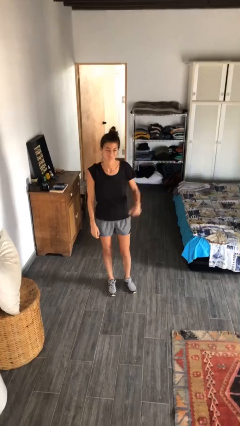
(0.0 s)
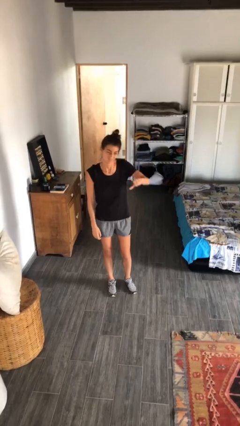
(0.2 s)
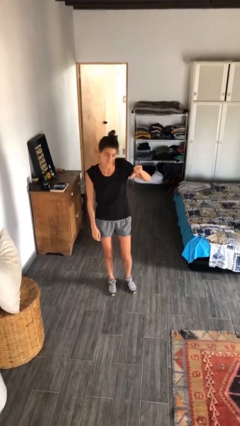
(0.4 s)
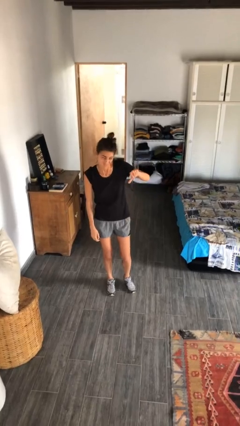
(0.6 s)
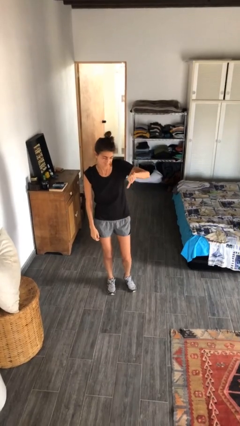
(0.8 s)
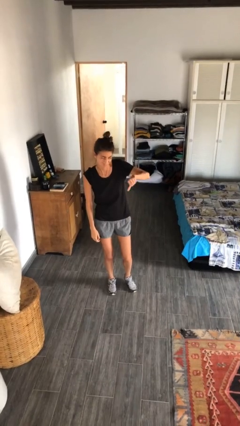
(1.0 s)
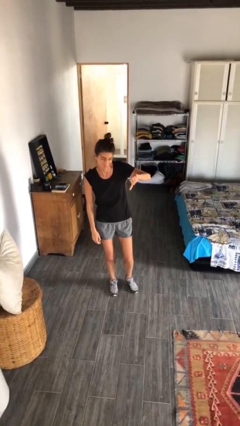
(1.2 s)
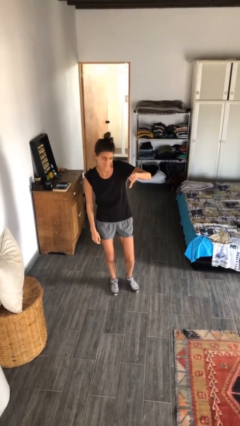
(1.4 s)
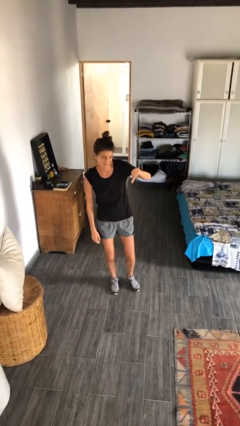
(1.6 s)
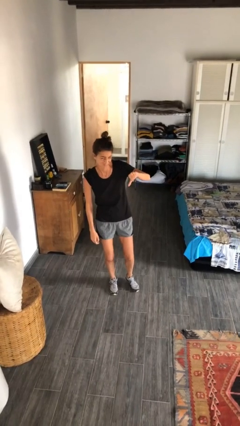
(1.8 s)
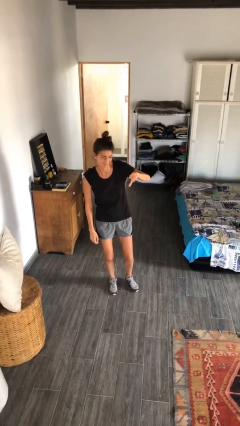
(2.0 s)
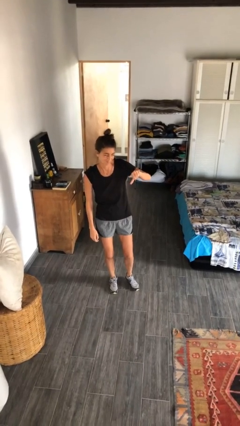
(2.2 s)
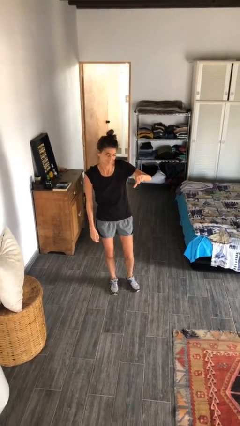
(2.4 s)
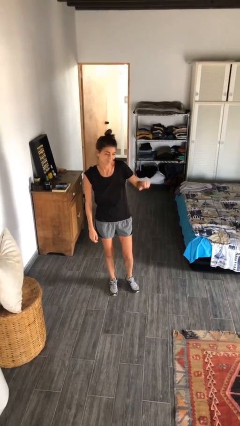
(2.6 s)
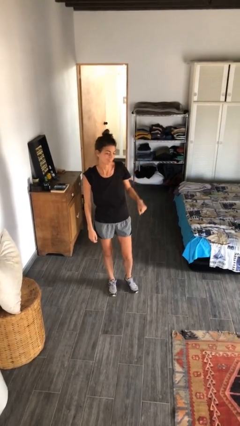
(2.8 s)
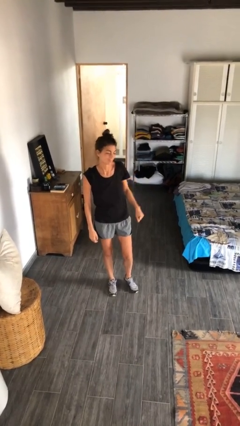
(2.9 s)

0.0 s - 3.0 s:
person gestures thumbs down

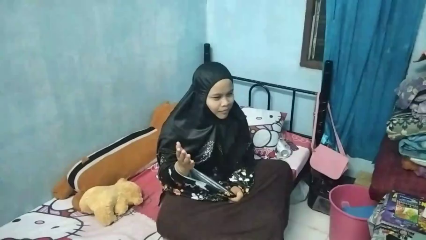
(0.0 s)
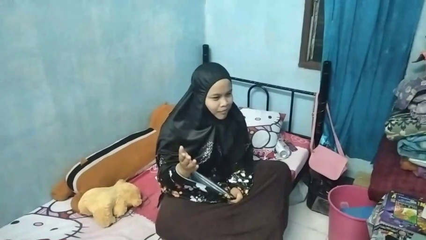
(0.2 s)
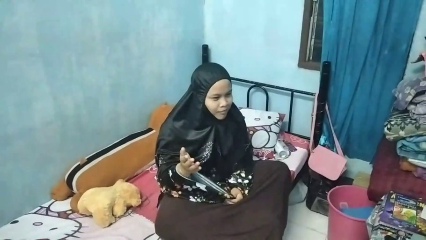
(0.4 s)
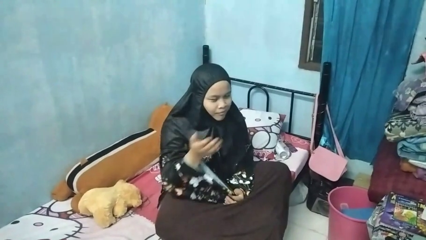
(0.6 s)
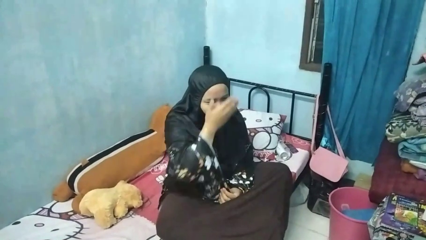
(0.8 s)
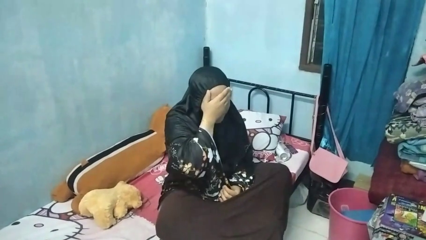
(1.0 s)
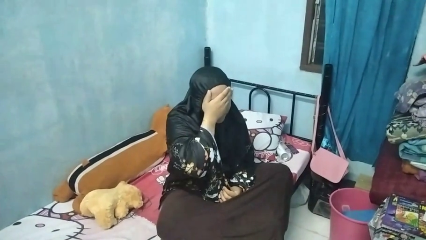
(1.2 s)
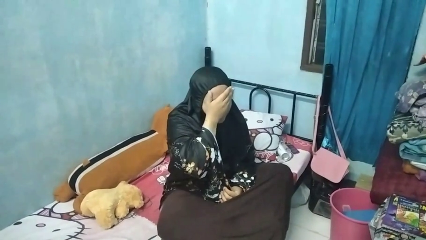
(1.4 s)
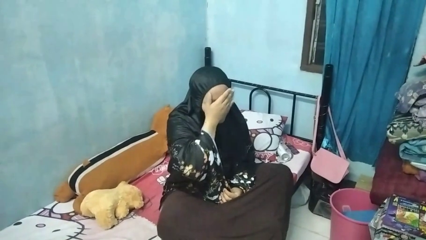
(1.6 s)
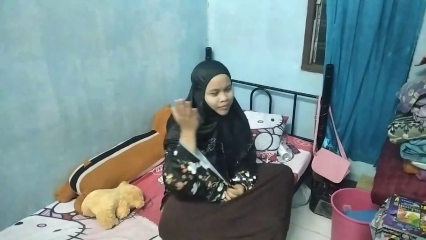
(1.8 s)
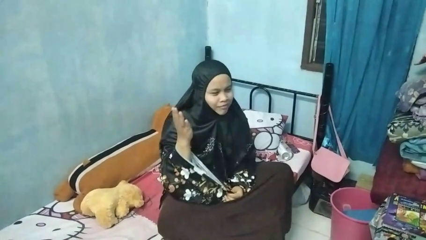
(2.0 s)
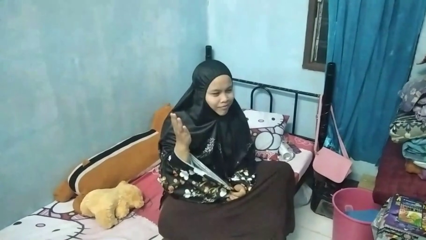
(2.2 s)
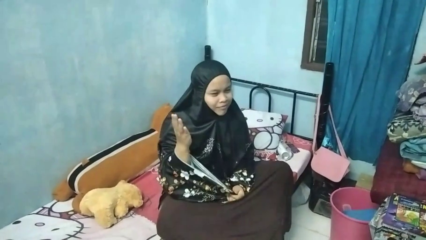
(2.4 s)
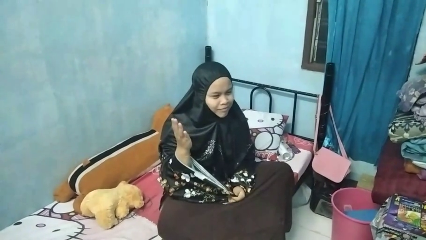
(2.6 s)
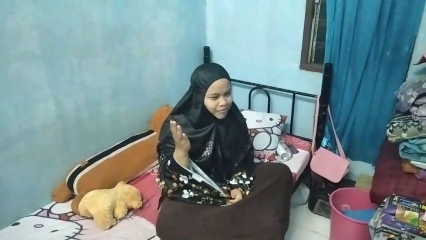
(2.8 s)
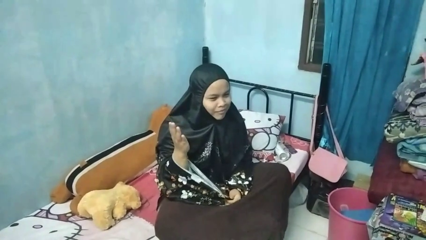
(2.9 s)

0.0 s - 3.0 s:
person covers face with hands

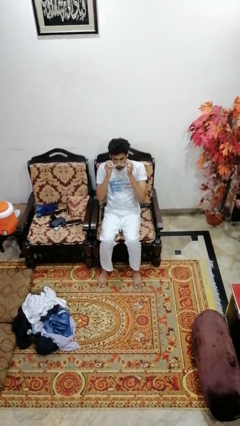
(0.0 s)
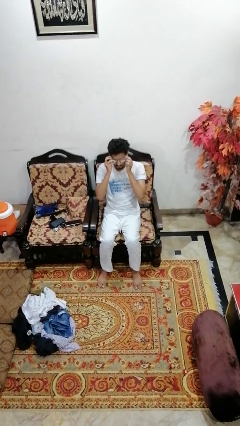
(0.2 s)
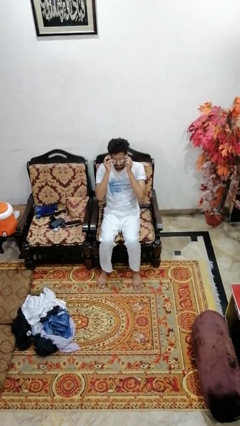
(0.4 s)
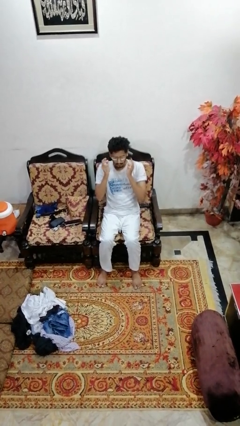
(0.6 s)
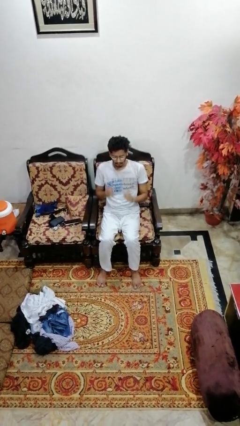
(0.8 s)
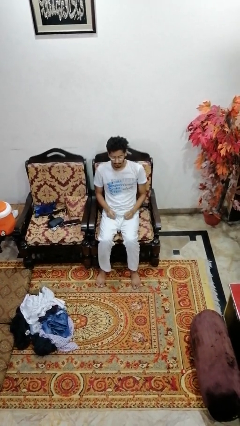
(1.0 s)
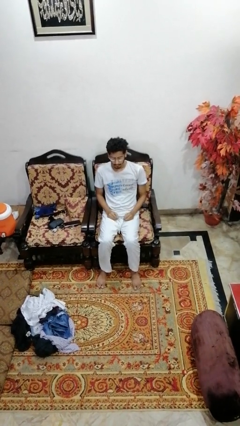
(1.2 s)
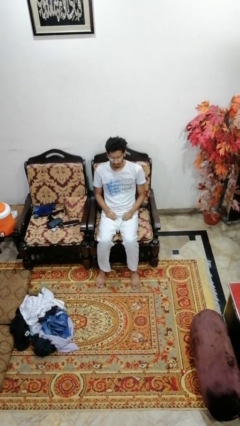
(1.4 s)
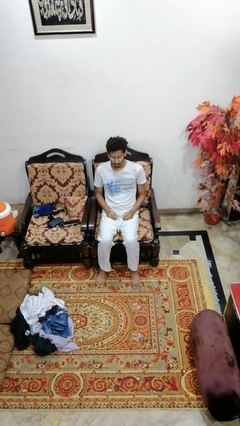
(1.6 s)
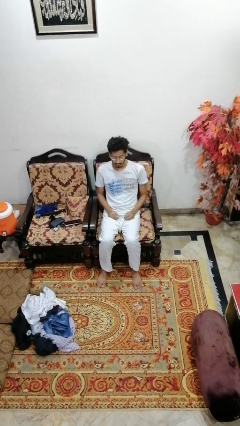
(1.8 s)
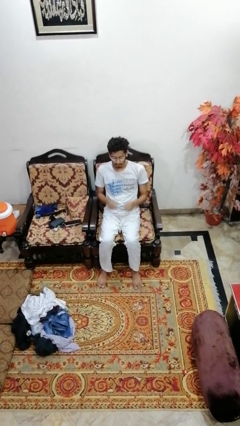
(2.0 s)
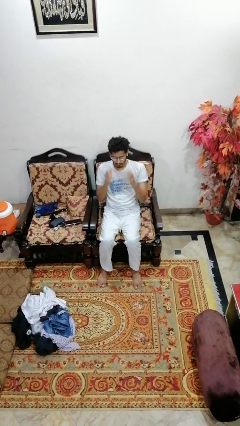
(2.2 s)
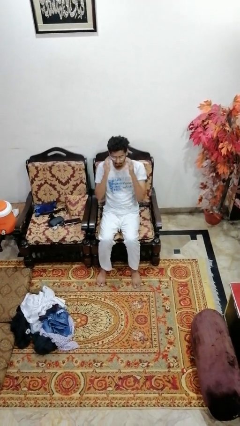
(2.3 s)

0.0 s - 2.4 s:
person puts on glasses

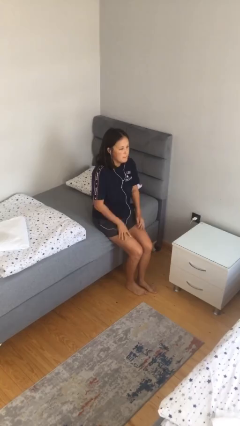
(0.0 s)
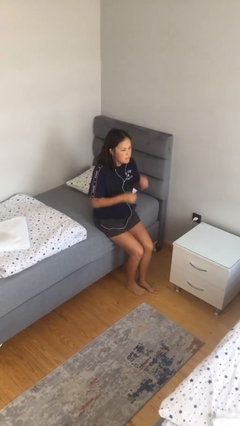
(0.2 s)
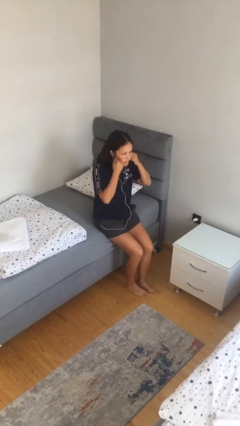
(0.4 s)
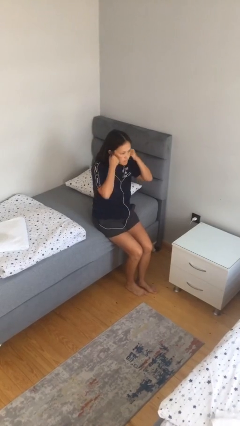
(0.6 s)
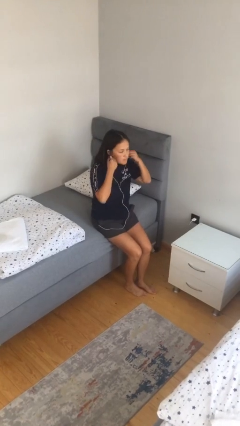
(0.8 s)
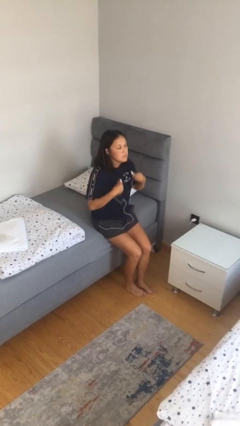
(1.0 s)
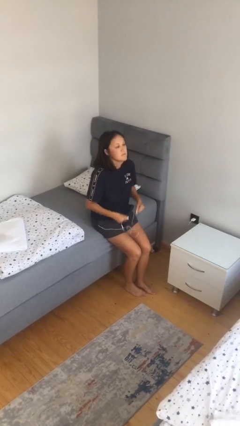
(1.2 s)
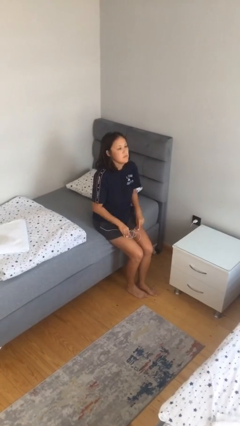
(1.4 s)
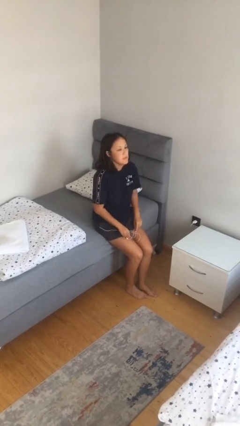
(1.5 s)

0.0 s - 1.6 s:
person takes off headphones

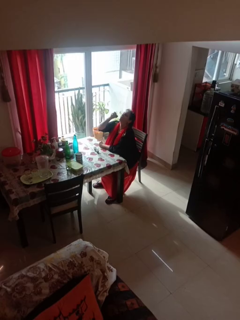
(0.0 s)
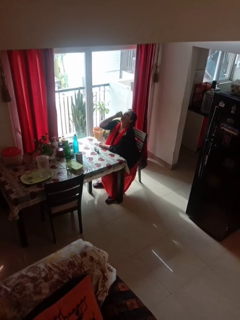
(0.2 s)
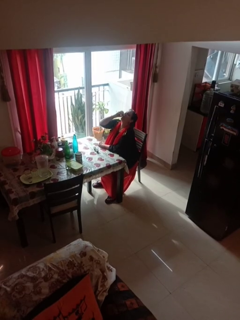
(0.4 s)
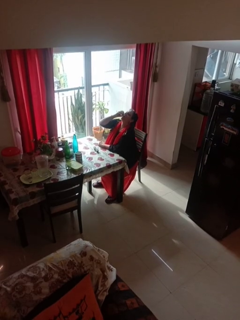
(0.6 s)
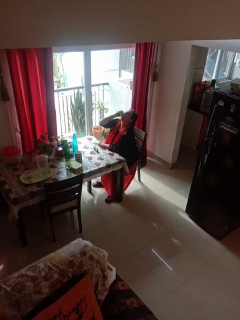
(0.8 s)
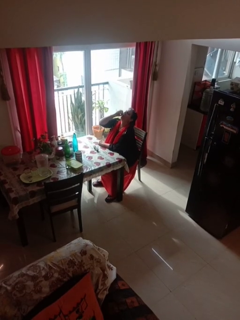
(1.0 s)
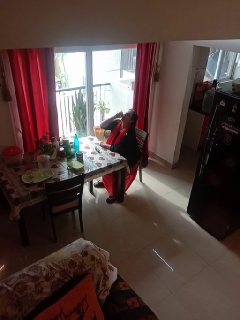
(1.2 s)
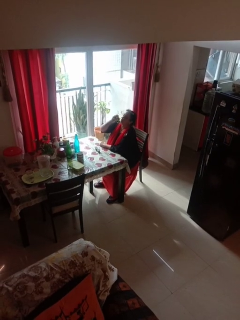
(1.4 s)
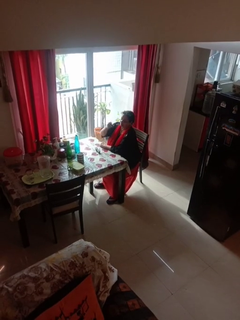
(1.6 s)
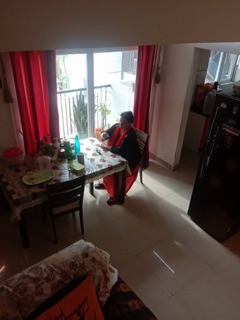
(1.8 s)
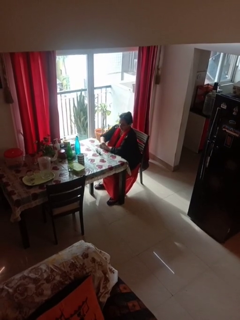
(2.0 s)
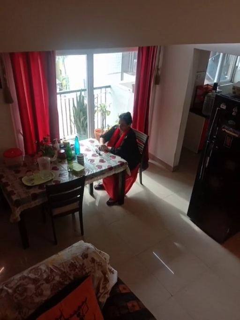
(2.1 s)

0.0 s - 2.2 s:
person drinks from shotglass

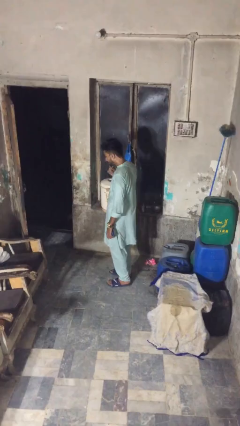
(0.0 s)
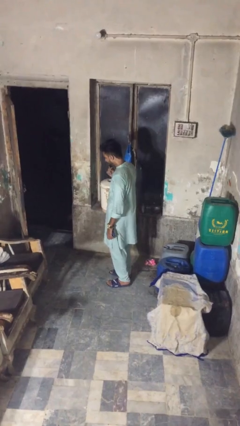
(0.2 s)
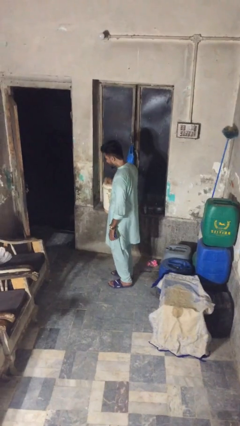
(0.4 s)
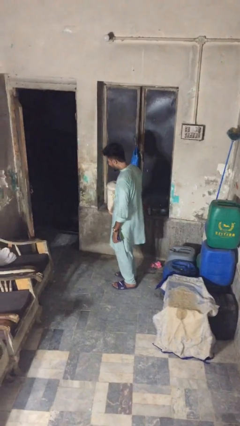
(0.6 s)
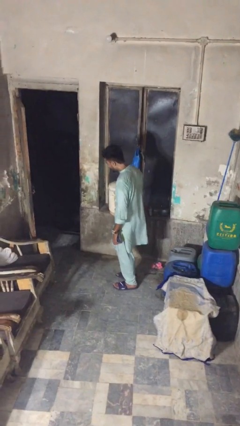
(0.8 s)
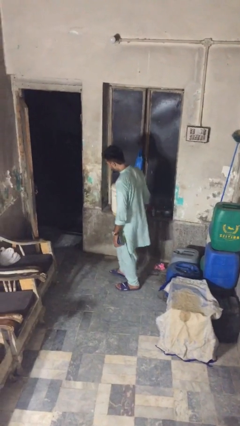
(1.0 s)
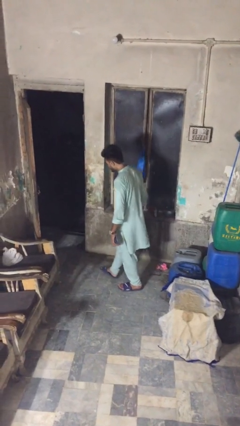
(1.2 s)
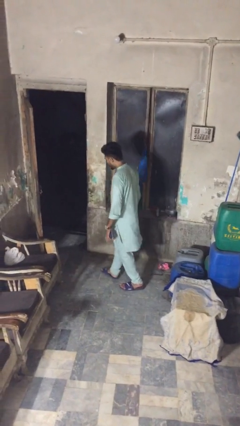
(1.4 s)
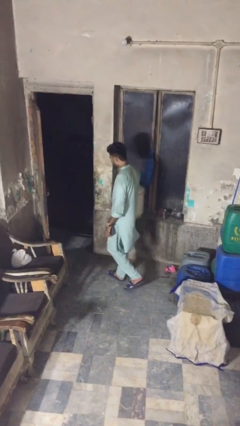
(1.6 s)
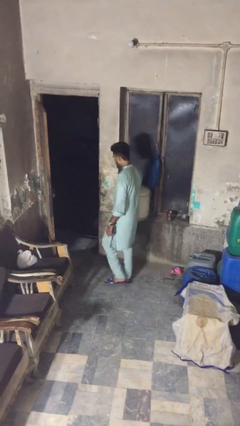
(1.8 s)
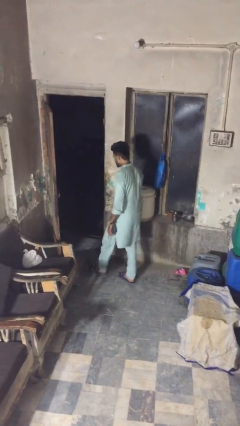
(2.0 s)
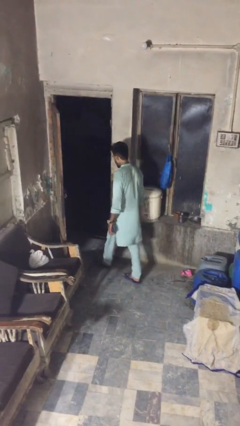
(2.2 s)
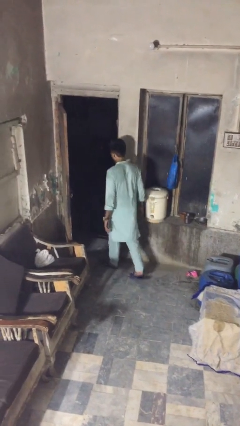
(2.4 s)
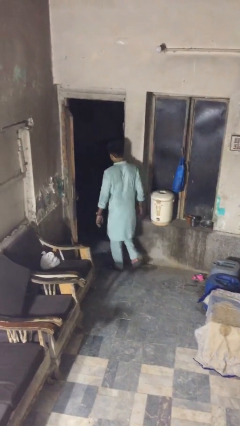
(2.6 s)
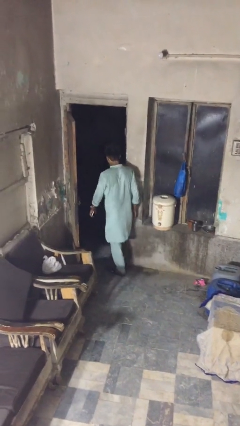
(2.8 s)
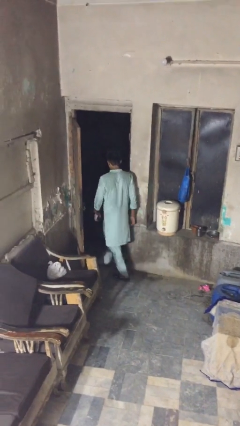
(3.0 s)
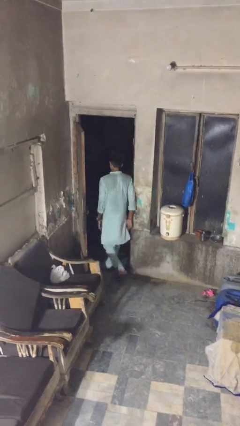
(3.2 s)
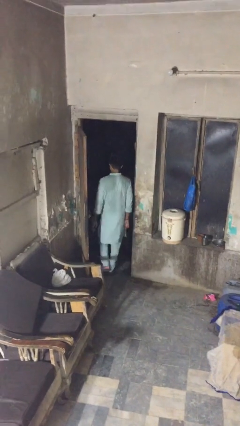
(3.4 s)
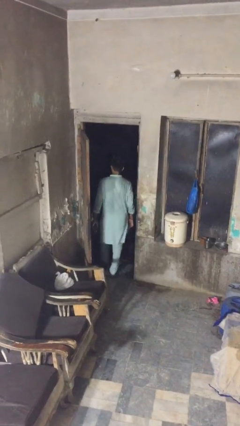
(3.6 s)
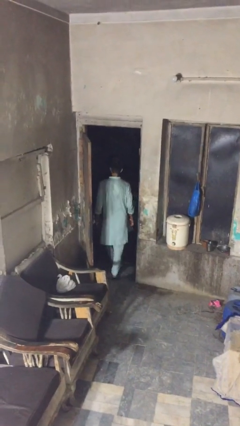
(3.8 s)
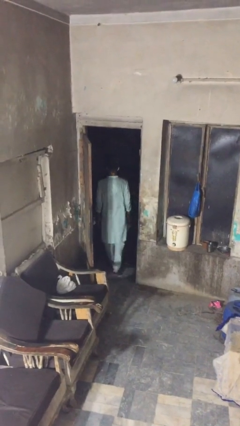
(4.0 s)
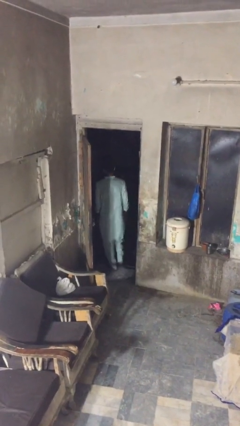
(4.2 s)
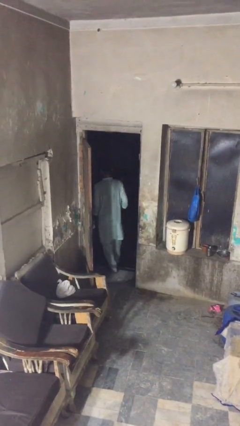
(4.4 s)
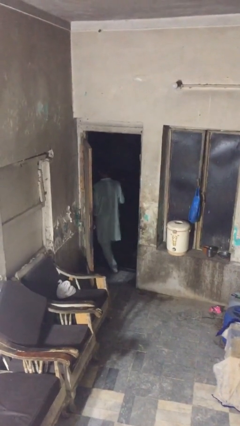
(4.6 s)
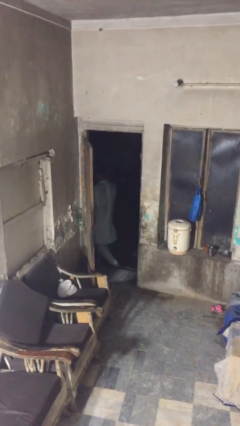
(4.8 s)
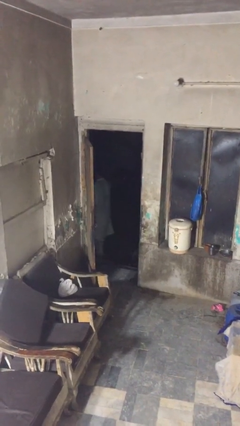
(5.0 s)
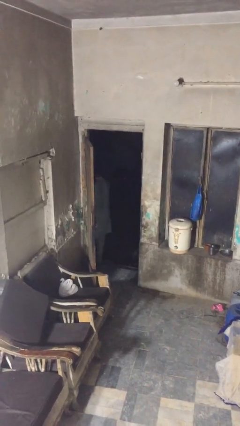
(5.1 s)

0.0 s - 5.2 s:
person exits scene through structure

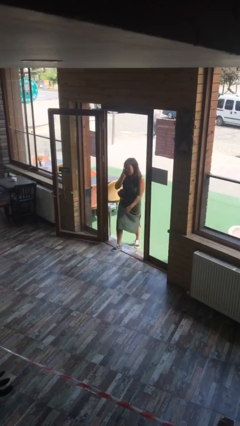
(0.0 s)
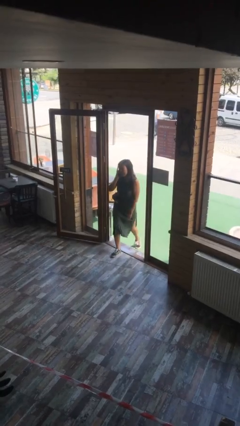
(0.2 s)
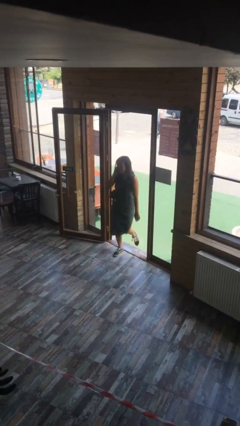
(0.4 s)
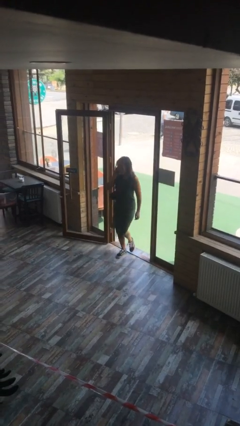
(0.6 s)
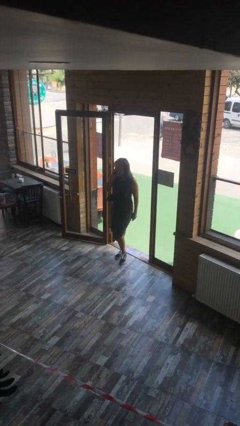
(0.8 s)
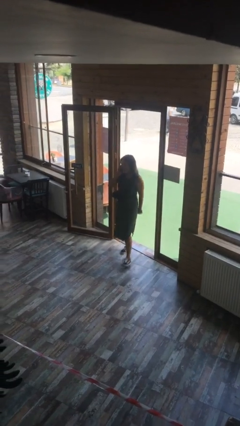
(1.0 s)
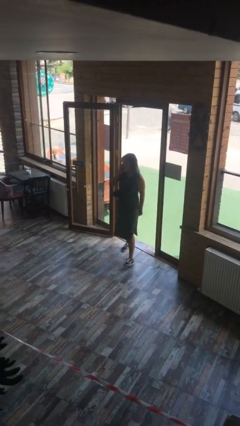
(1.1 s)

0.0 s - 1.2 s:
person enters scene through structure
